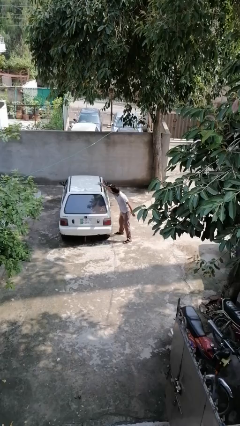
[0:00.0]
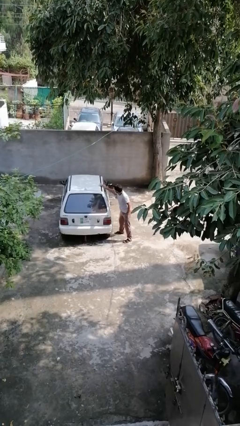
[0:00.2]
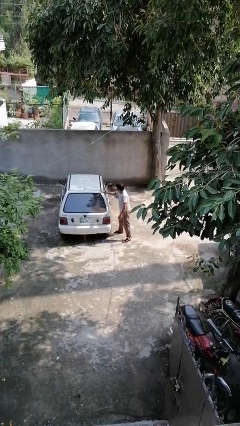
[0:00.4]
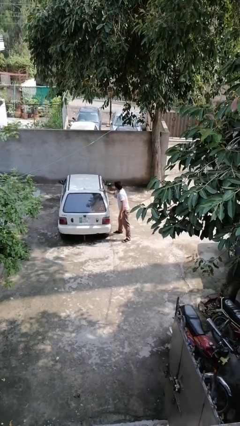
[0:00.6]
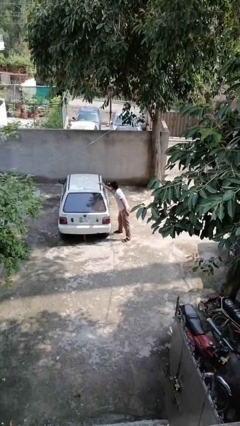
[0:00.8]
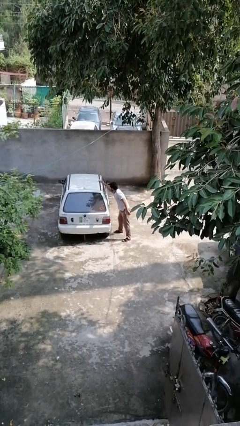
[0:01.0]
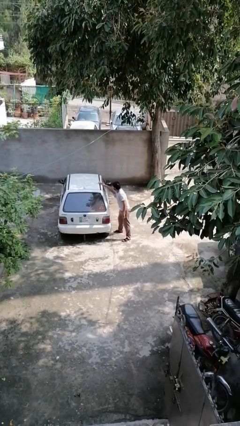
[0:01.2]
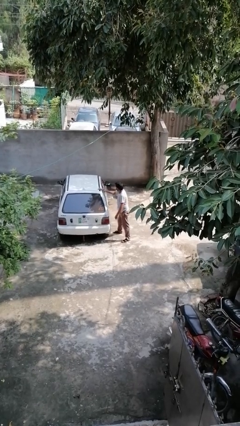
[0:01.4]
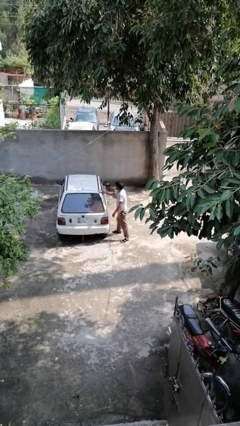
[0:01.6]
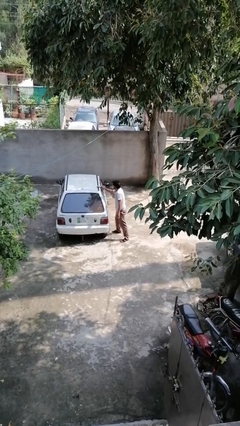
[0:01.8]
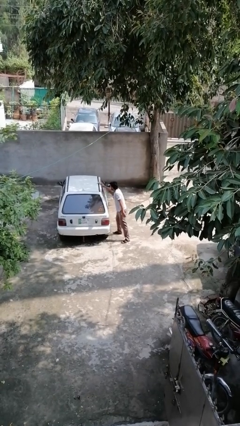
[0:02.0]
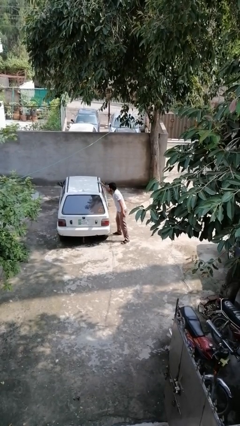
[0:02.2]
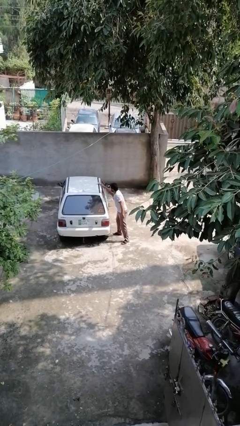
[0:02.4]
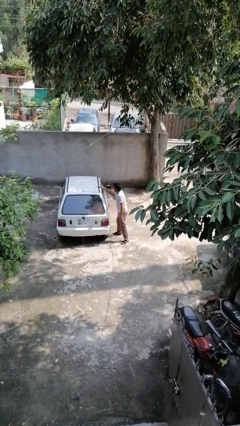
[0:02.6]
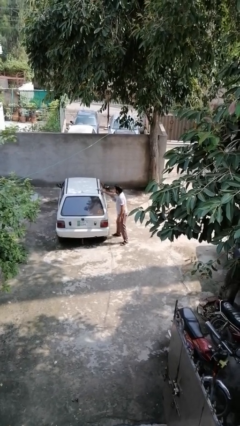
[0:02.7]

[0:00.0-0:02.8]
person polishes car with rag

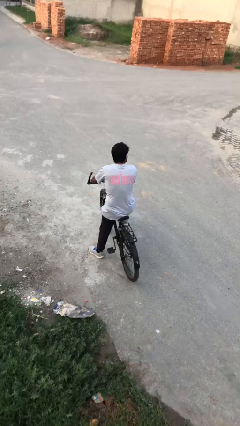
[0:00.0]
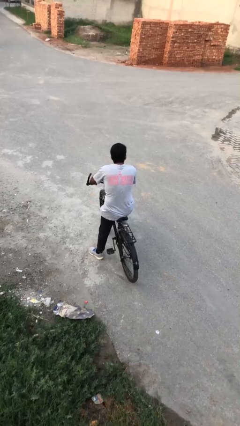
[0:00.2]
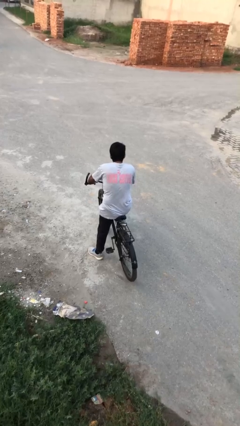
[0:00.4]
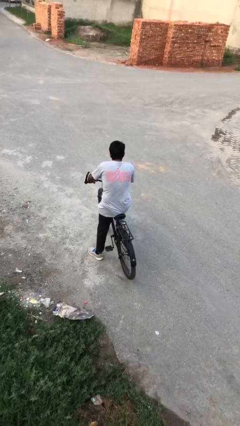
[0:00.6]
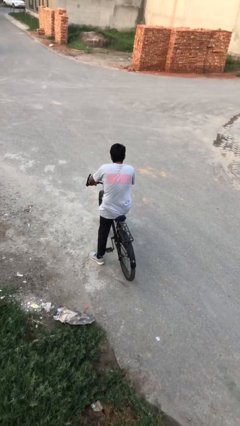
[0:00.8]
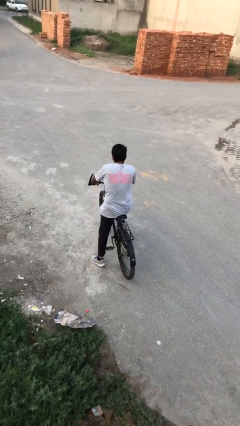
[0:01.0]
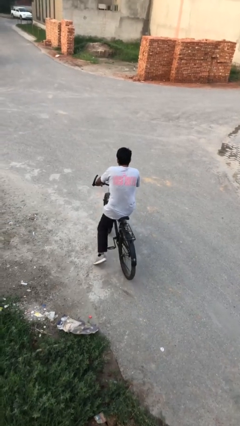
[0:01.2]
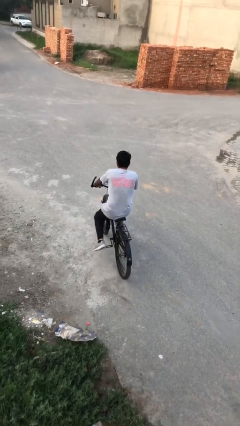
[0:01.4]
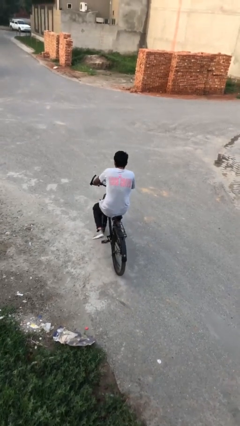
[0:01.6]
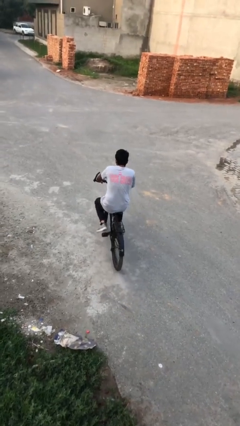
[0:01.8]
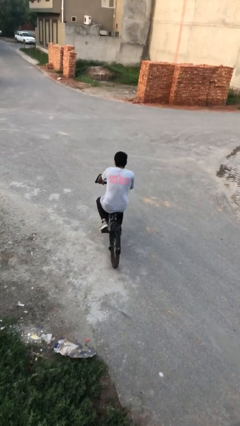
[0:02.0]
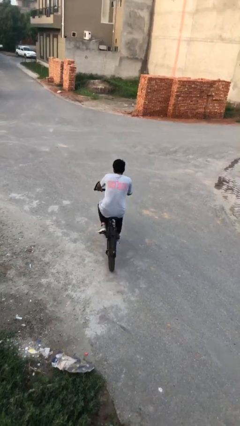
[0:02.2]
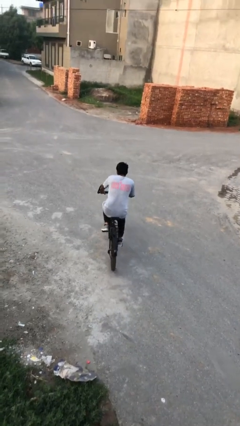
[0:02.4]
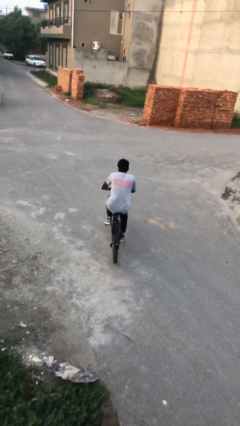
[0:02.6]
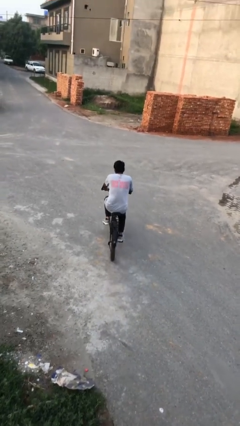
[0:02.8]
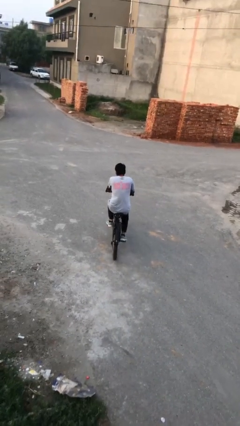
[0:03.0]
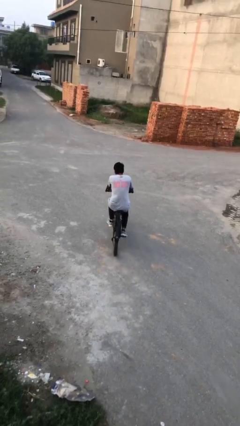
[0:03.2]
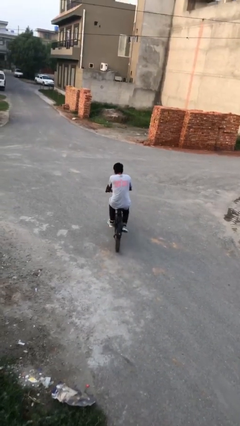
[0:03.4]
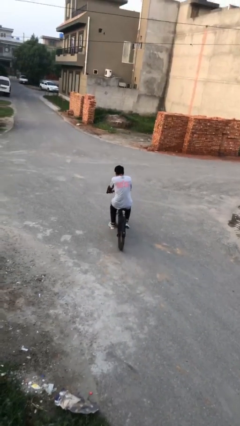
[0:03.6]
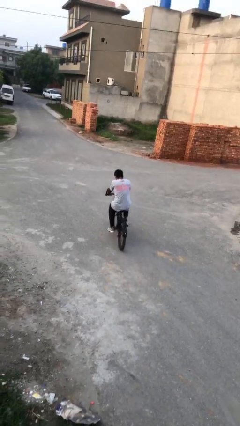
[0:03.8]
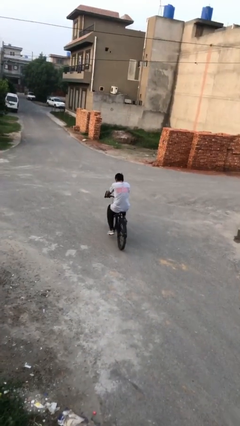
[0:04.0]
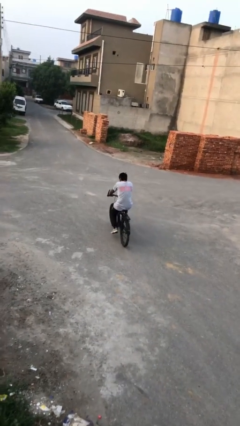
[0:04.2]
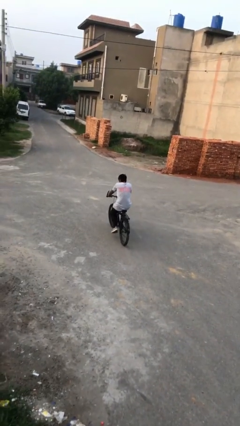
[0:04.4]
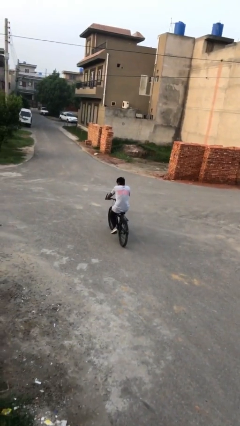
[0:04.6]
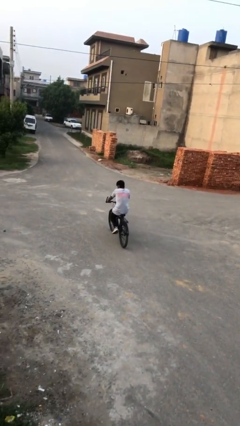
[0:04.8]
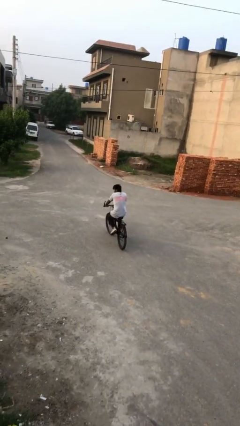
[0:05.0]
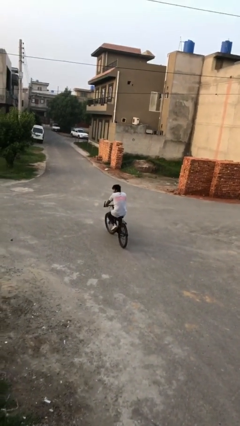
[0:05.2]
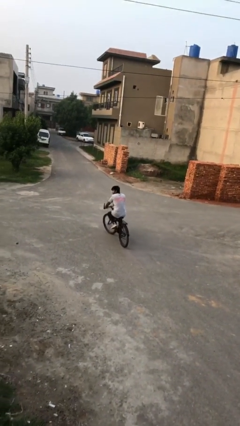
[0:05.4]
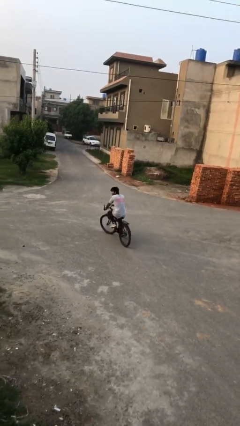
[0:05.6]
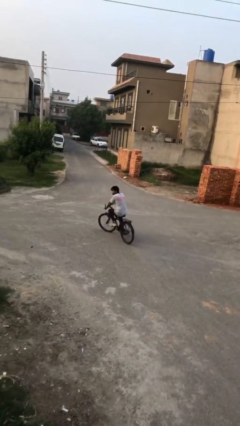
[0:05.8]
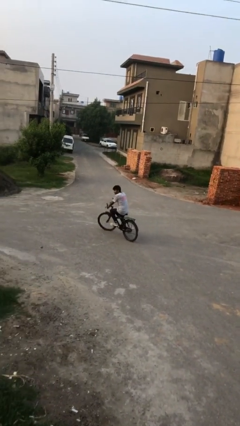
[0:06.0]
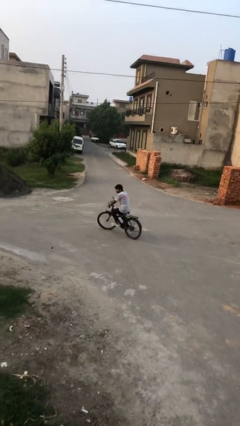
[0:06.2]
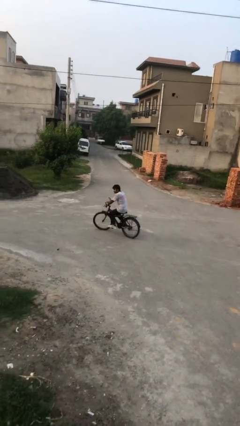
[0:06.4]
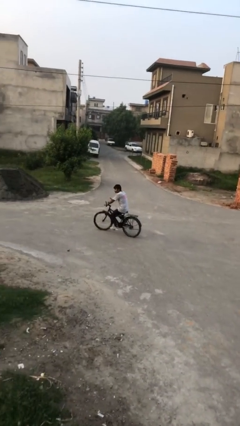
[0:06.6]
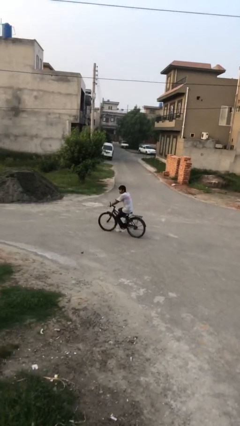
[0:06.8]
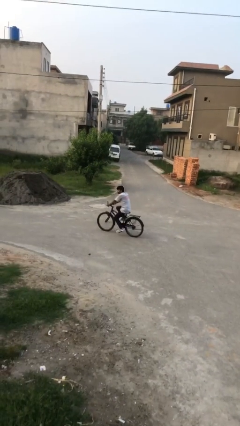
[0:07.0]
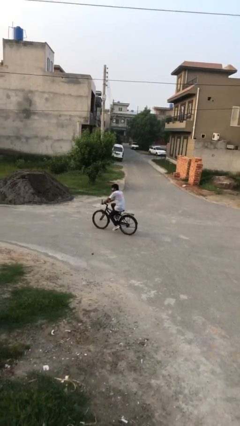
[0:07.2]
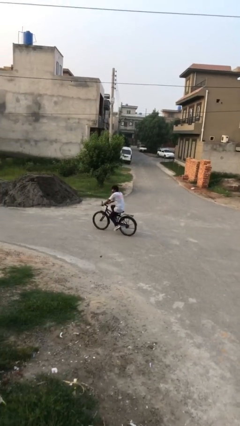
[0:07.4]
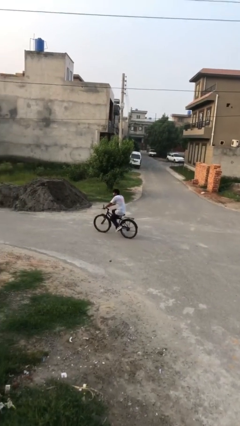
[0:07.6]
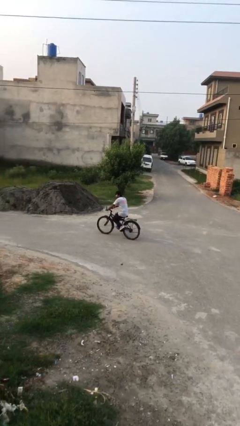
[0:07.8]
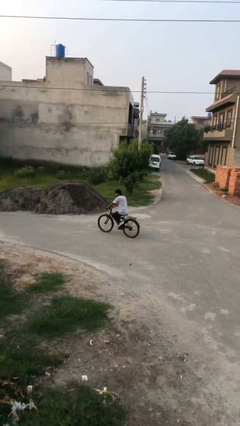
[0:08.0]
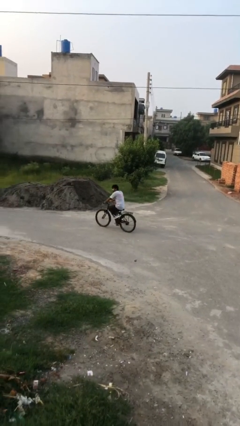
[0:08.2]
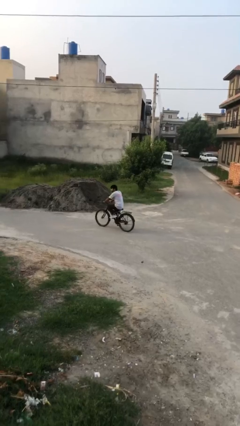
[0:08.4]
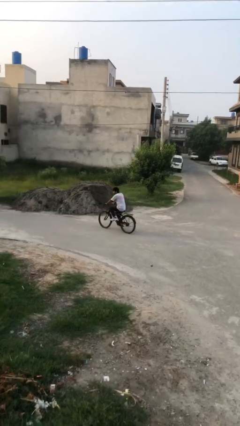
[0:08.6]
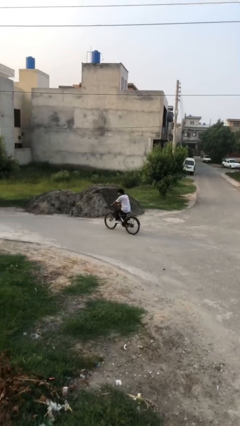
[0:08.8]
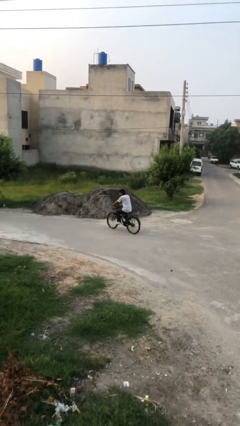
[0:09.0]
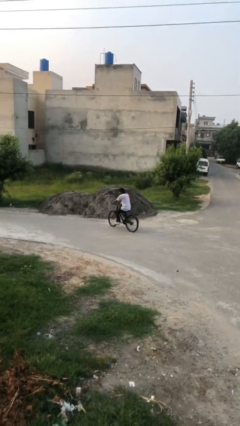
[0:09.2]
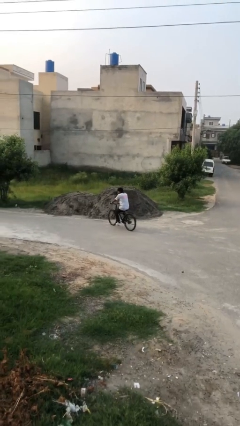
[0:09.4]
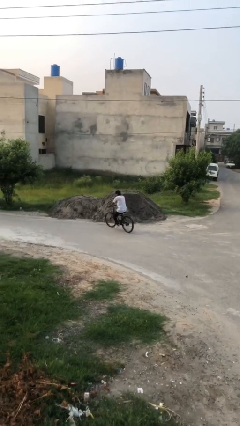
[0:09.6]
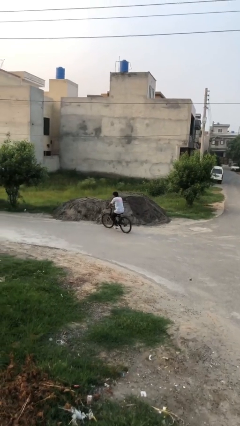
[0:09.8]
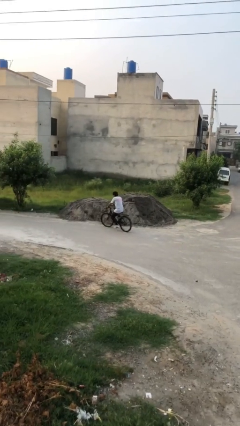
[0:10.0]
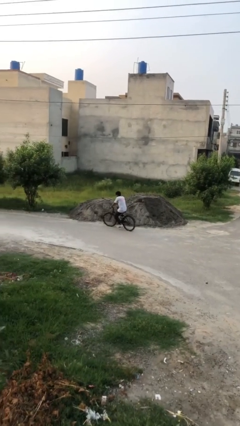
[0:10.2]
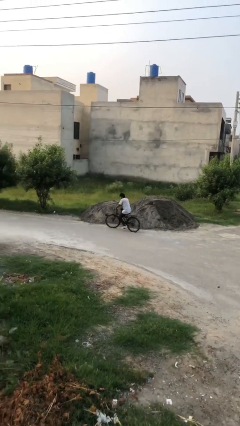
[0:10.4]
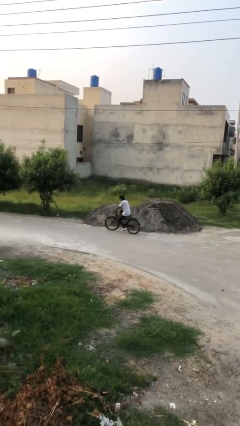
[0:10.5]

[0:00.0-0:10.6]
person rides bicycle

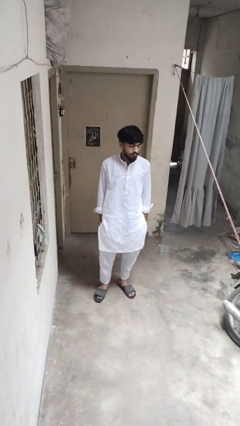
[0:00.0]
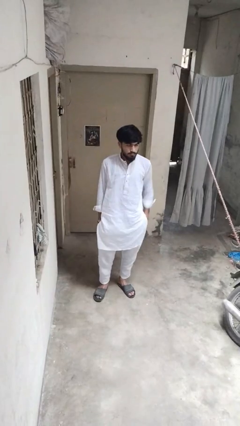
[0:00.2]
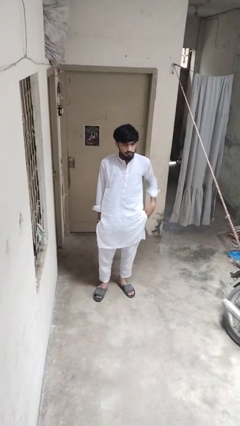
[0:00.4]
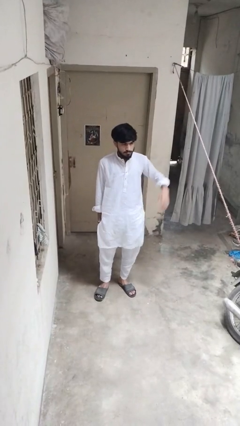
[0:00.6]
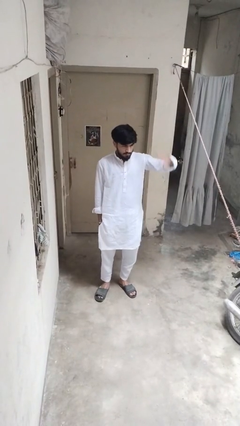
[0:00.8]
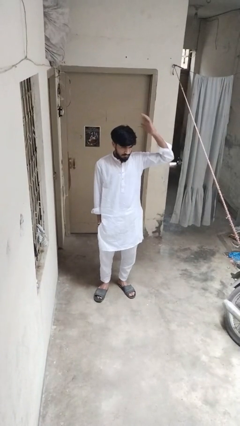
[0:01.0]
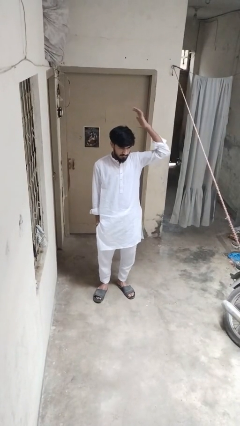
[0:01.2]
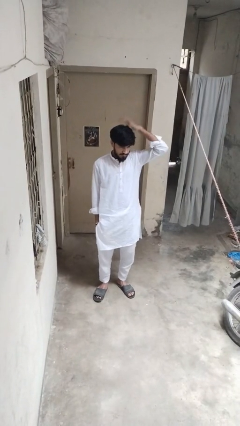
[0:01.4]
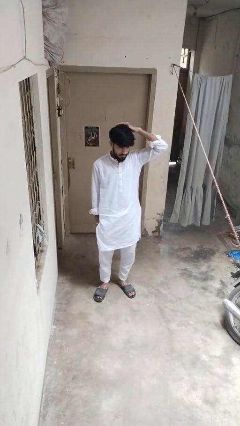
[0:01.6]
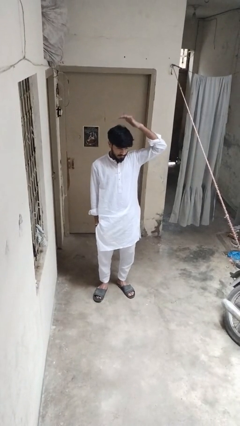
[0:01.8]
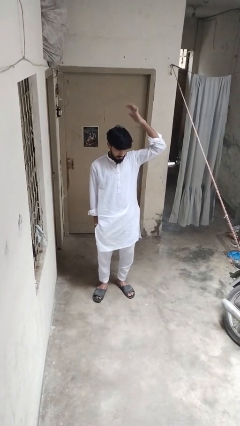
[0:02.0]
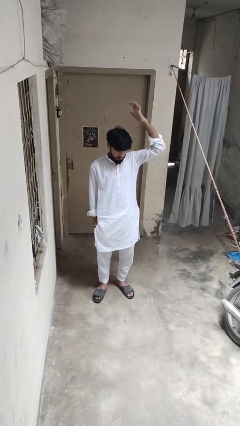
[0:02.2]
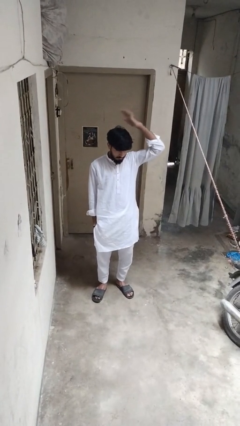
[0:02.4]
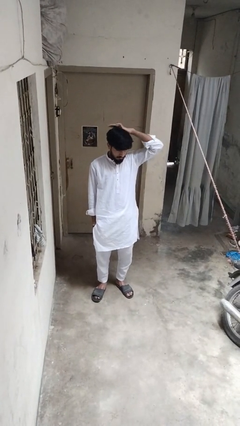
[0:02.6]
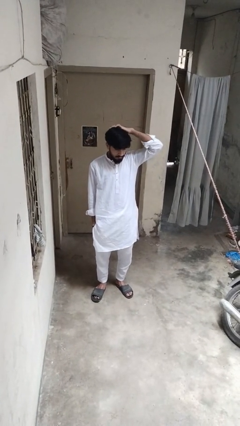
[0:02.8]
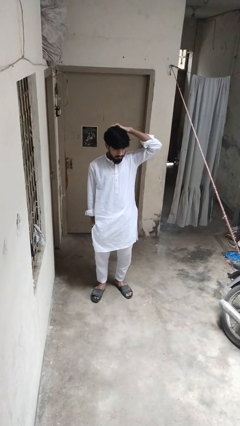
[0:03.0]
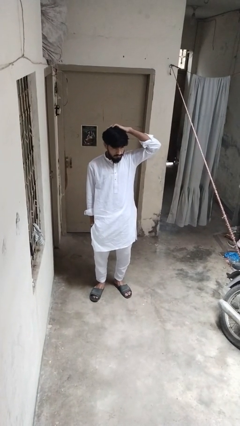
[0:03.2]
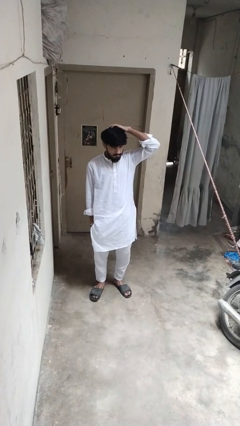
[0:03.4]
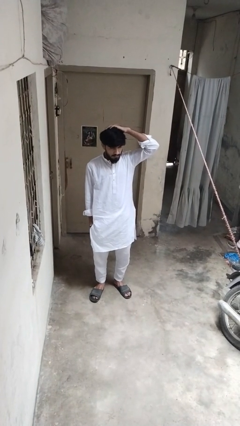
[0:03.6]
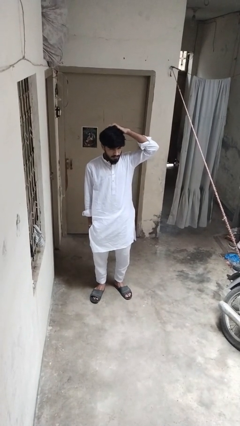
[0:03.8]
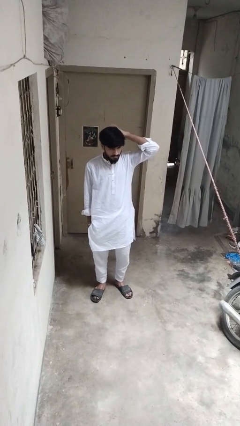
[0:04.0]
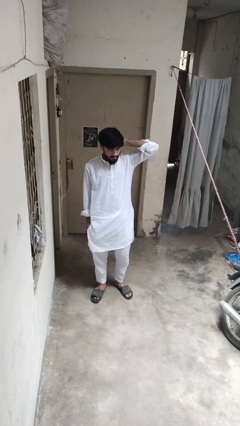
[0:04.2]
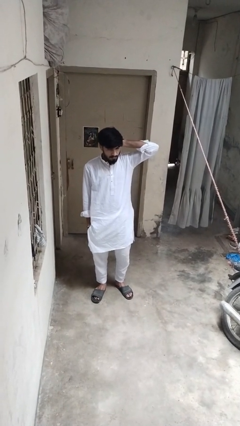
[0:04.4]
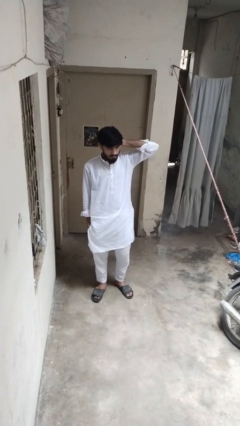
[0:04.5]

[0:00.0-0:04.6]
person pats head
